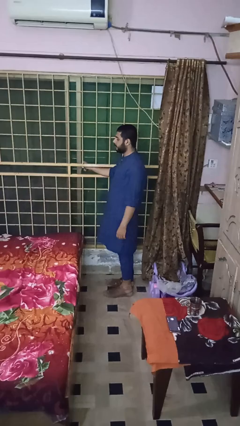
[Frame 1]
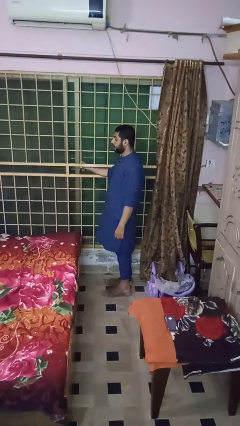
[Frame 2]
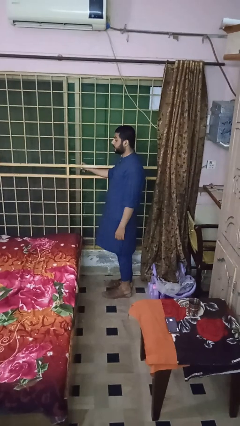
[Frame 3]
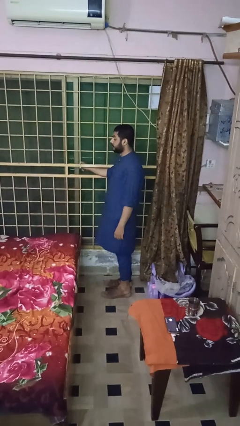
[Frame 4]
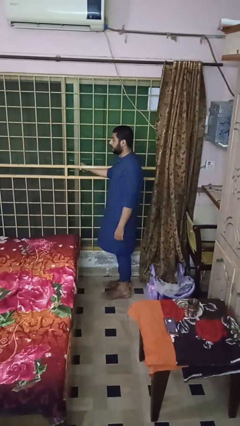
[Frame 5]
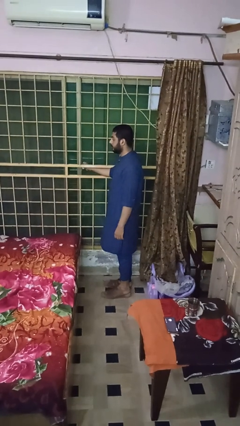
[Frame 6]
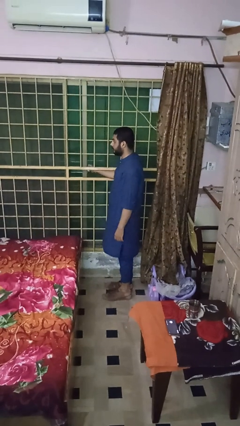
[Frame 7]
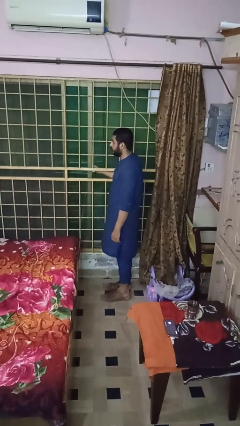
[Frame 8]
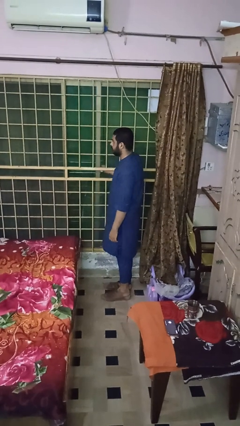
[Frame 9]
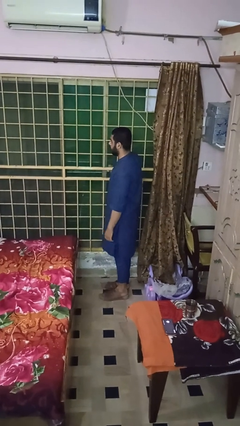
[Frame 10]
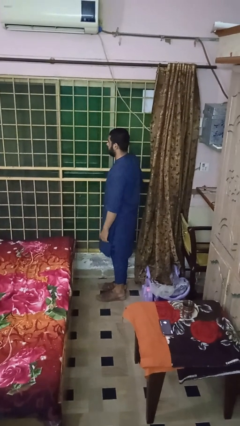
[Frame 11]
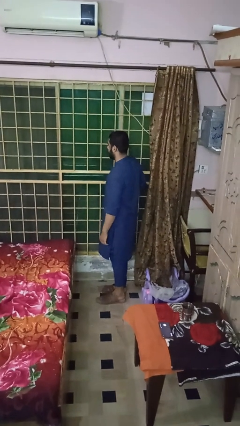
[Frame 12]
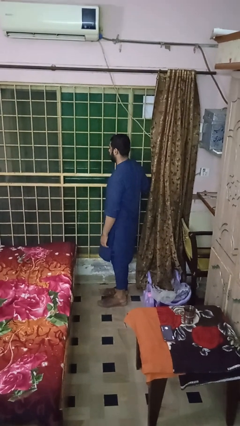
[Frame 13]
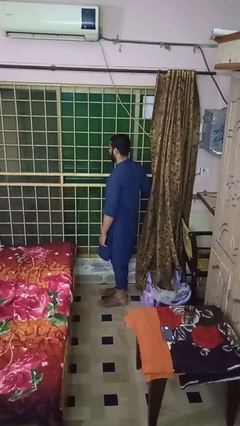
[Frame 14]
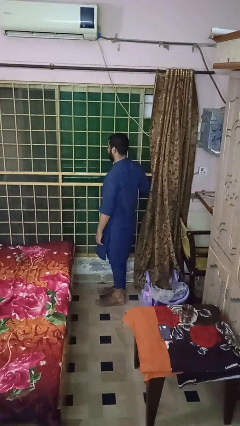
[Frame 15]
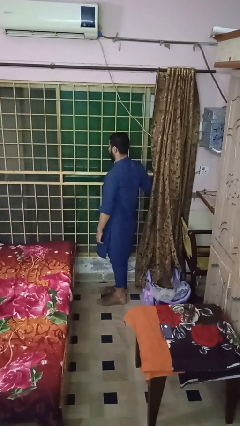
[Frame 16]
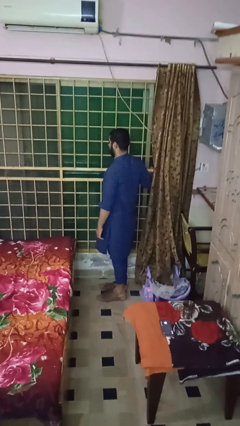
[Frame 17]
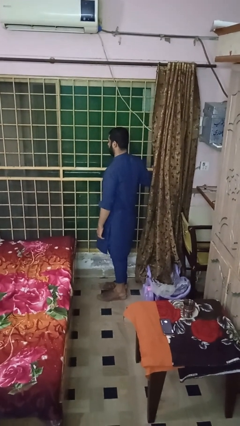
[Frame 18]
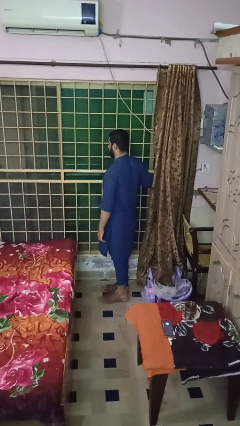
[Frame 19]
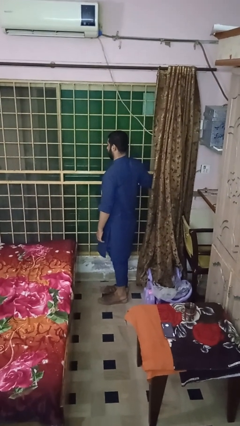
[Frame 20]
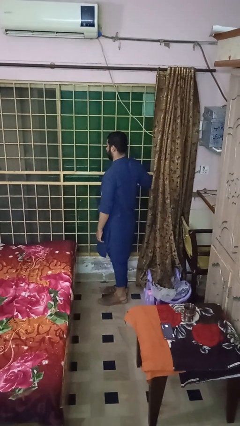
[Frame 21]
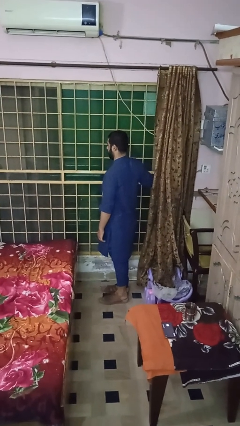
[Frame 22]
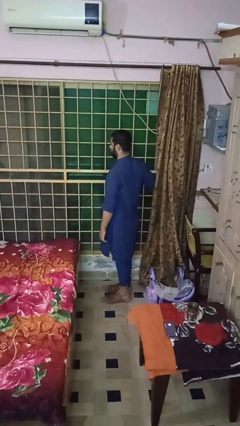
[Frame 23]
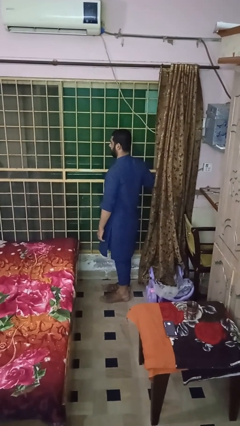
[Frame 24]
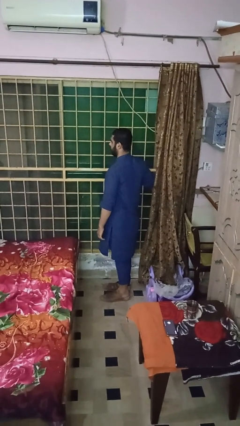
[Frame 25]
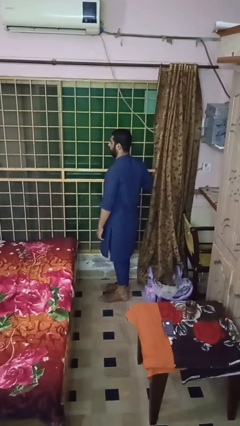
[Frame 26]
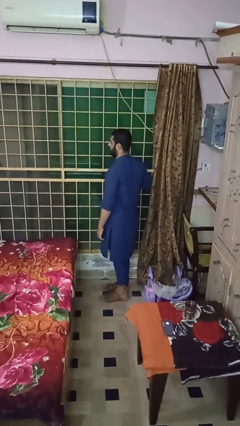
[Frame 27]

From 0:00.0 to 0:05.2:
person opens sliding door

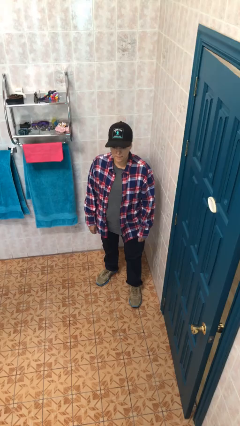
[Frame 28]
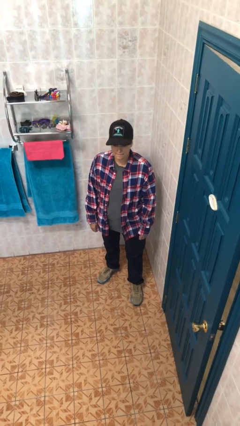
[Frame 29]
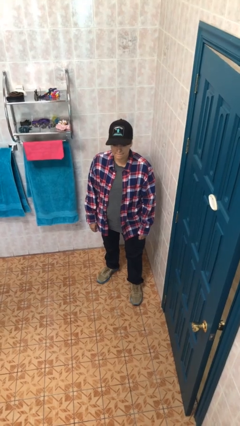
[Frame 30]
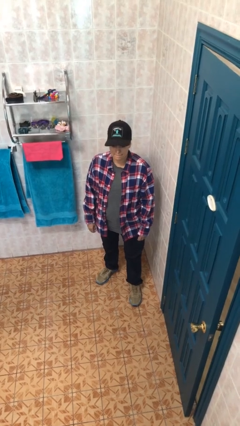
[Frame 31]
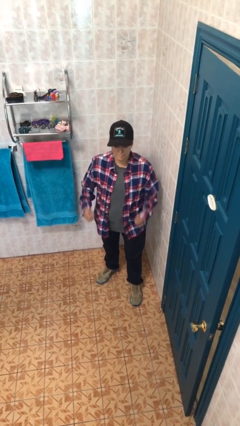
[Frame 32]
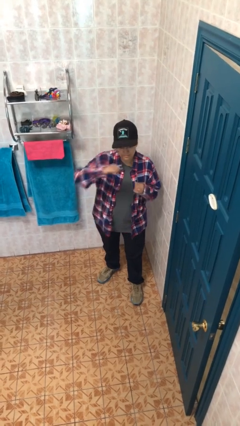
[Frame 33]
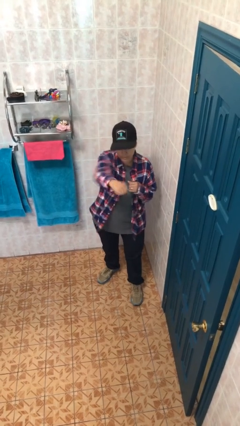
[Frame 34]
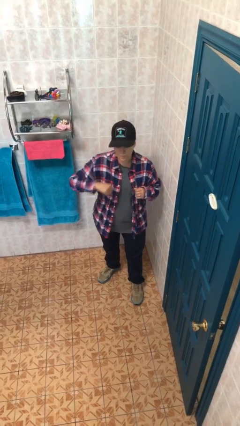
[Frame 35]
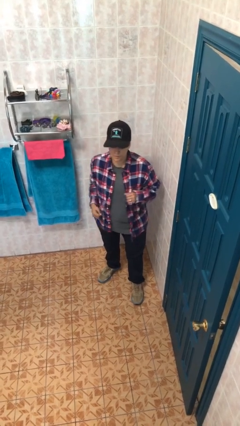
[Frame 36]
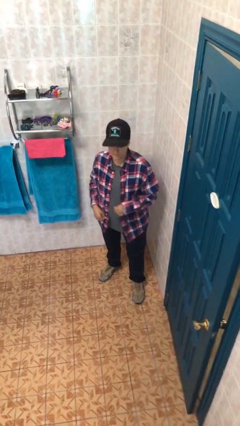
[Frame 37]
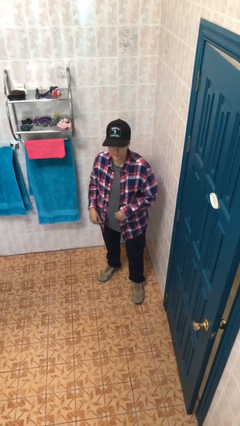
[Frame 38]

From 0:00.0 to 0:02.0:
person punches

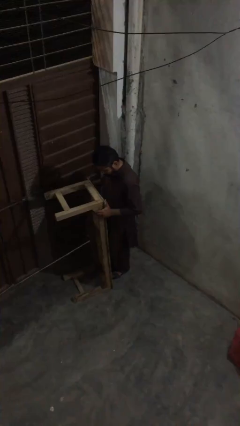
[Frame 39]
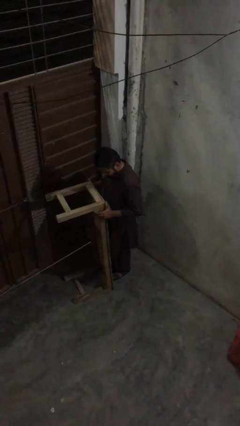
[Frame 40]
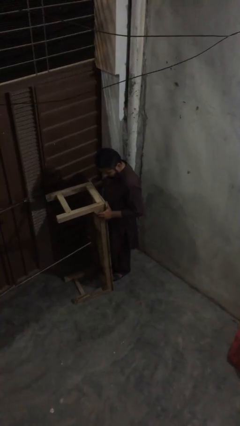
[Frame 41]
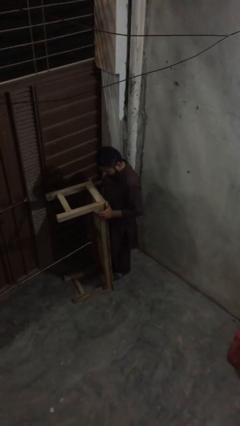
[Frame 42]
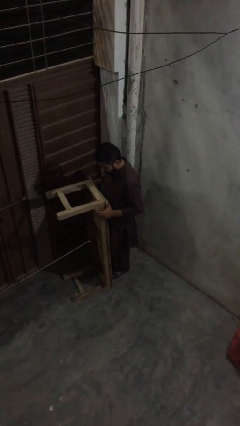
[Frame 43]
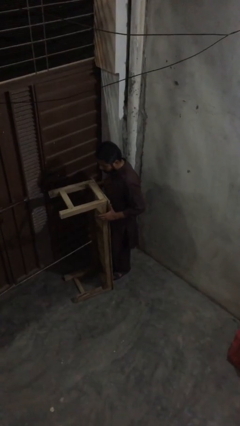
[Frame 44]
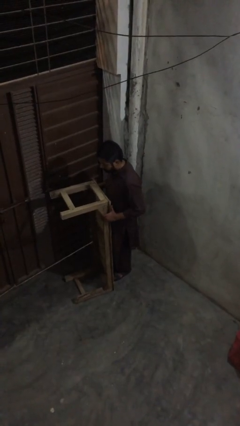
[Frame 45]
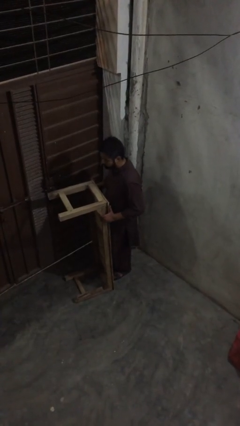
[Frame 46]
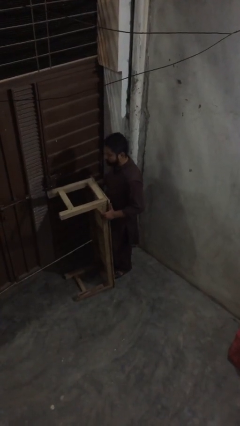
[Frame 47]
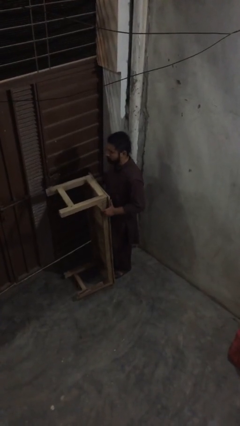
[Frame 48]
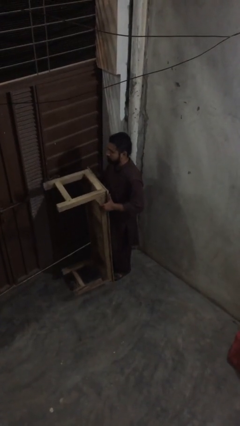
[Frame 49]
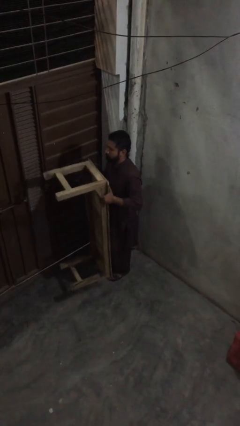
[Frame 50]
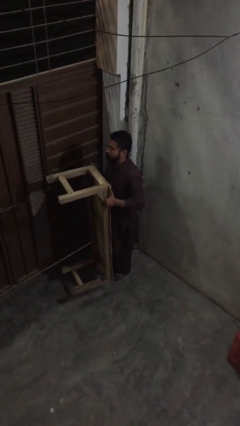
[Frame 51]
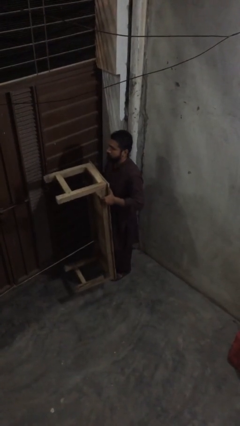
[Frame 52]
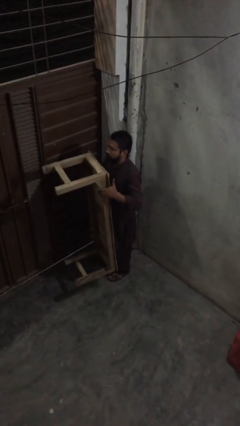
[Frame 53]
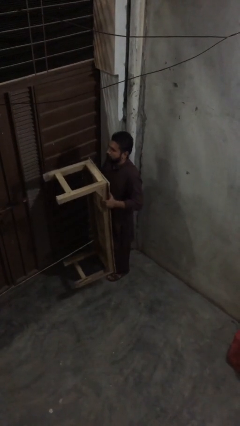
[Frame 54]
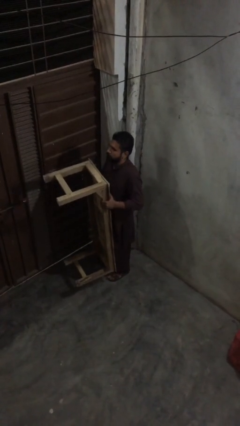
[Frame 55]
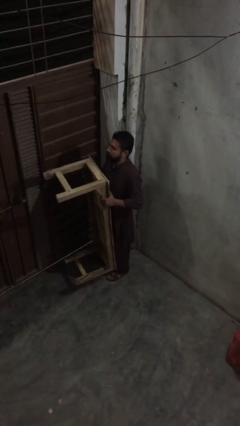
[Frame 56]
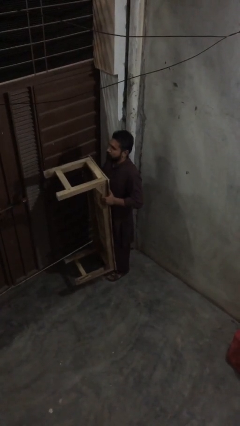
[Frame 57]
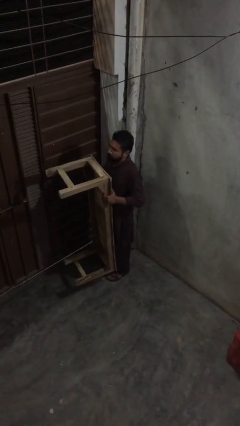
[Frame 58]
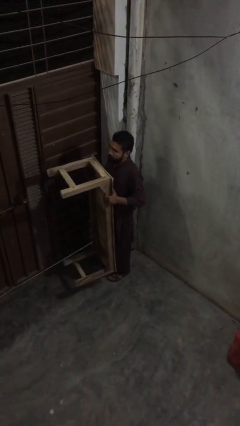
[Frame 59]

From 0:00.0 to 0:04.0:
person picks up object from floor

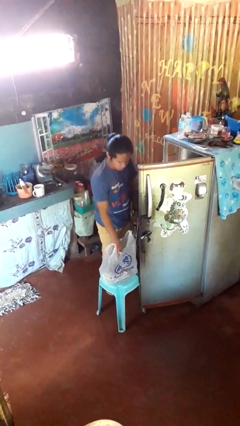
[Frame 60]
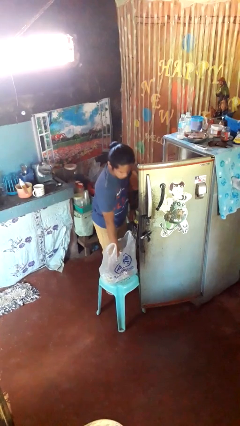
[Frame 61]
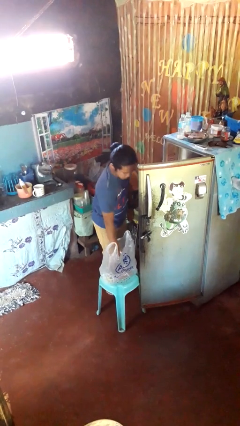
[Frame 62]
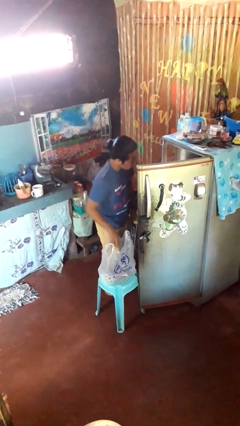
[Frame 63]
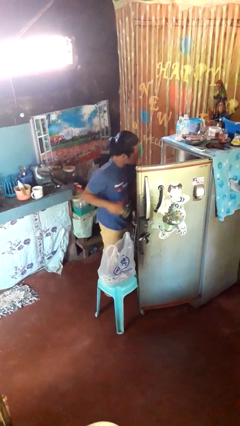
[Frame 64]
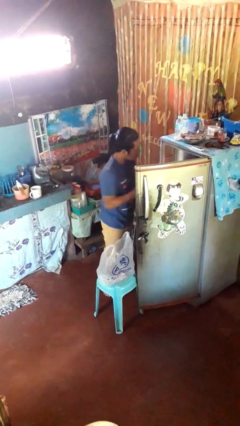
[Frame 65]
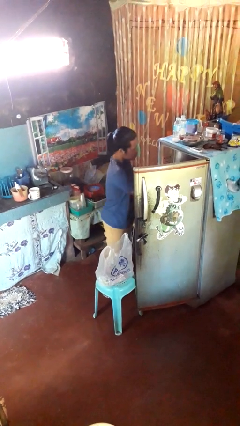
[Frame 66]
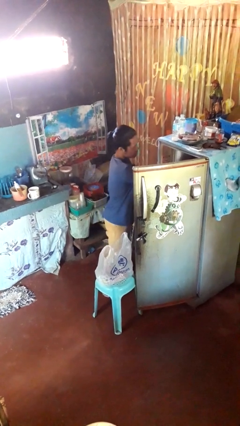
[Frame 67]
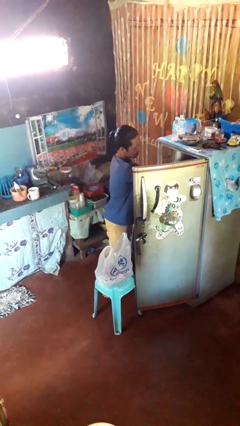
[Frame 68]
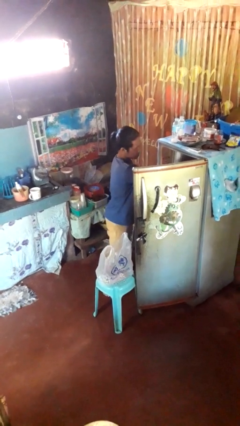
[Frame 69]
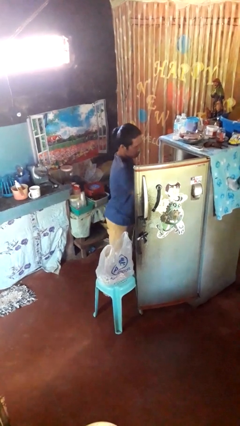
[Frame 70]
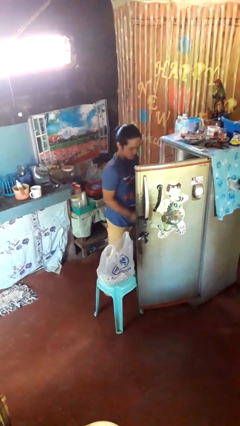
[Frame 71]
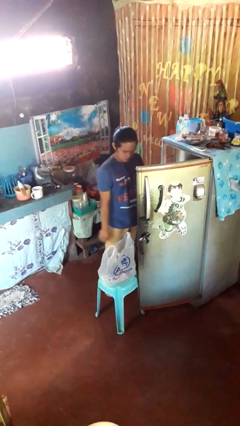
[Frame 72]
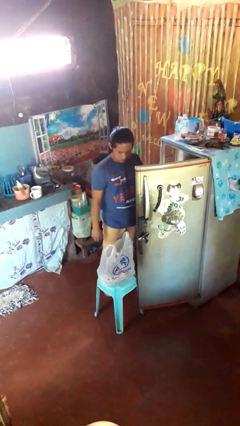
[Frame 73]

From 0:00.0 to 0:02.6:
person loads groceries into refrigerator

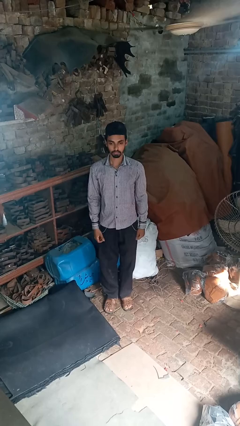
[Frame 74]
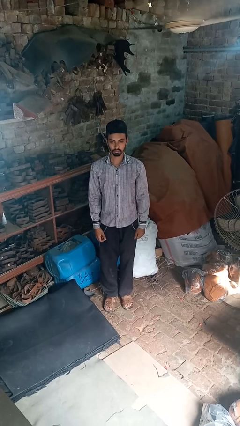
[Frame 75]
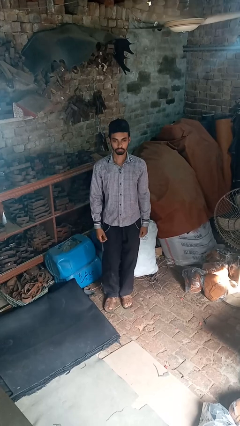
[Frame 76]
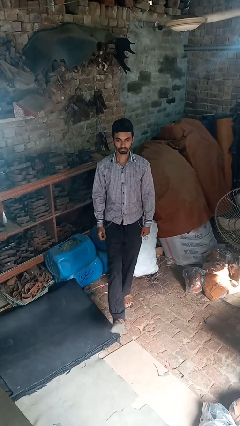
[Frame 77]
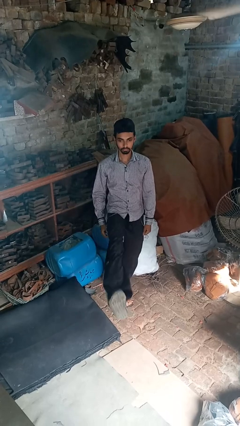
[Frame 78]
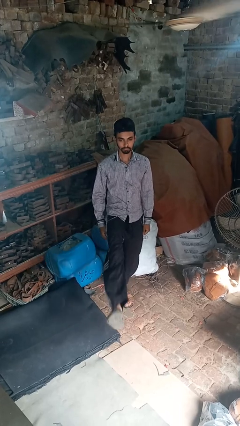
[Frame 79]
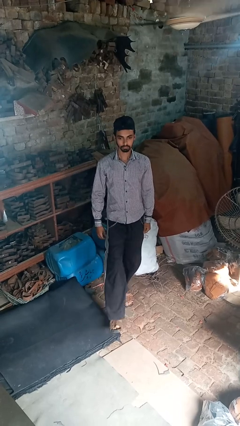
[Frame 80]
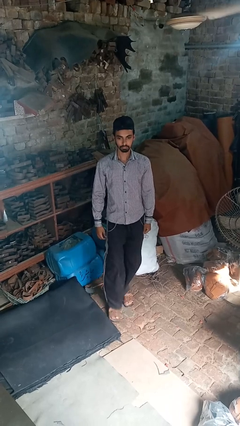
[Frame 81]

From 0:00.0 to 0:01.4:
person karate kicks

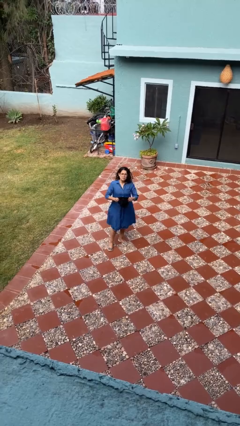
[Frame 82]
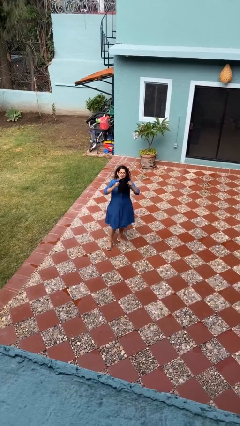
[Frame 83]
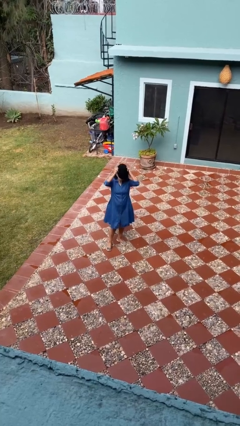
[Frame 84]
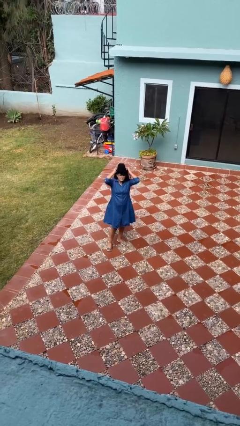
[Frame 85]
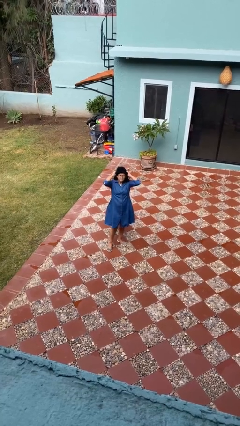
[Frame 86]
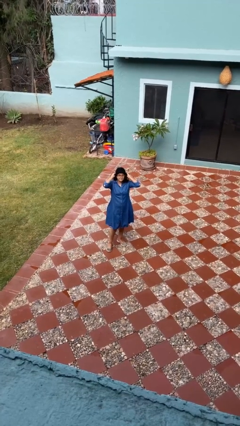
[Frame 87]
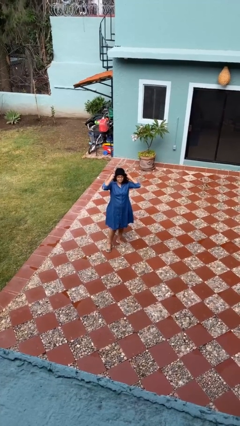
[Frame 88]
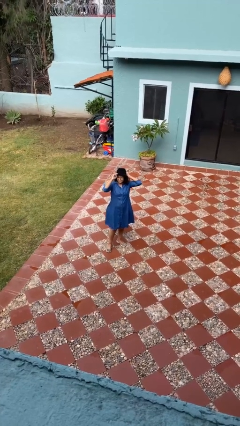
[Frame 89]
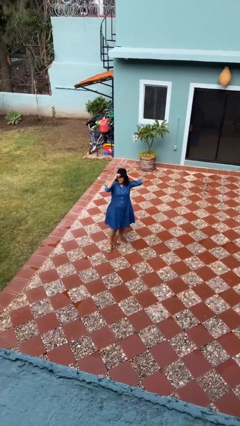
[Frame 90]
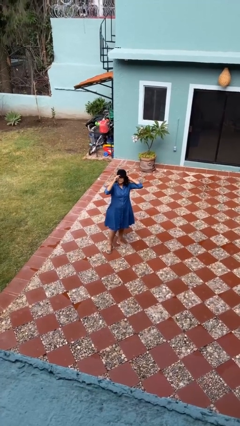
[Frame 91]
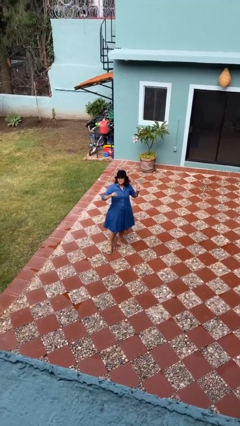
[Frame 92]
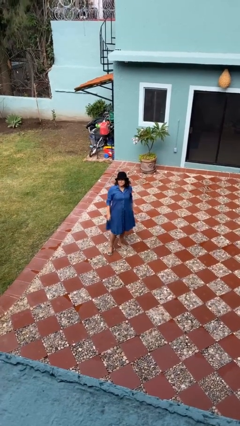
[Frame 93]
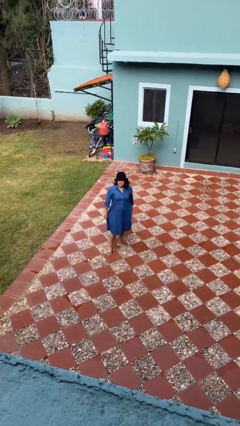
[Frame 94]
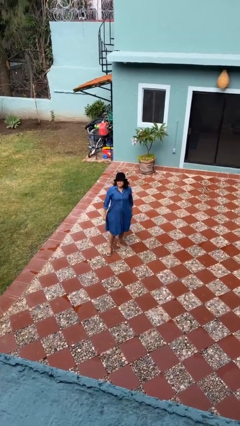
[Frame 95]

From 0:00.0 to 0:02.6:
person puts on hat
